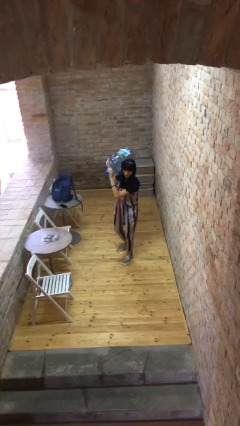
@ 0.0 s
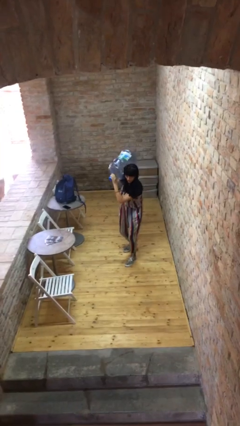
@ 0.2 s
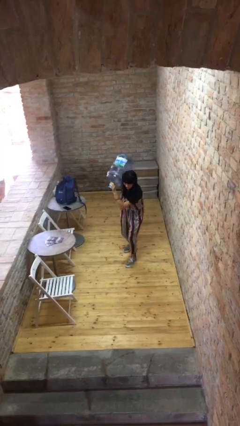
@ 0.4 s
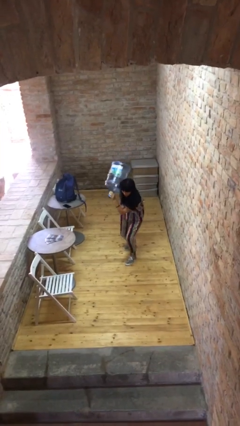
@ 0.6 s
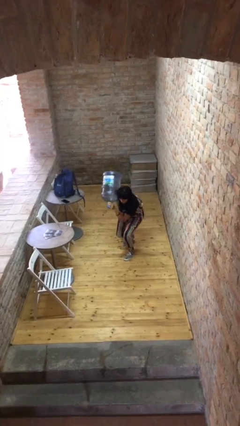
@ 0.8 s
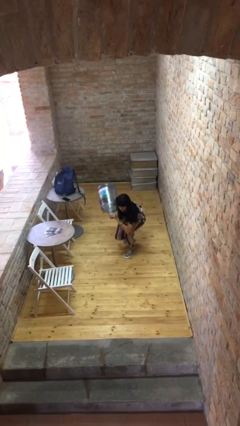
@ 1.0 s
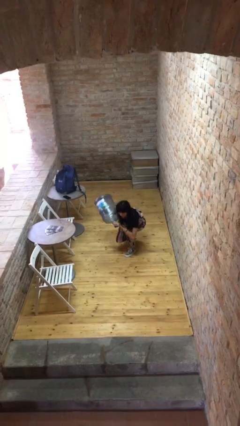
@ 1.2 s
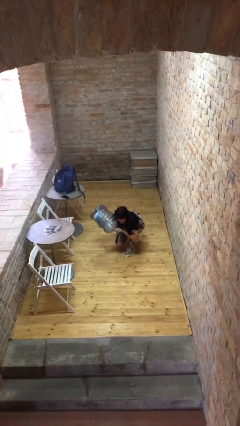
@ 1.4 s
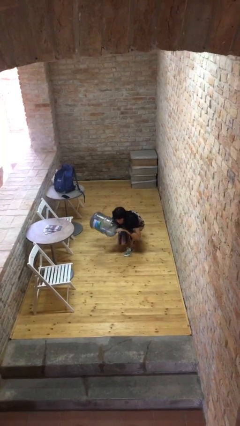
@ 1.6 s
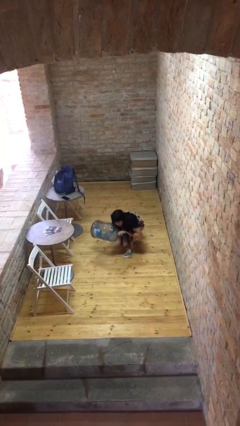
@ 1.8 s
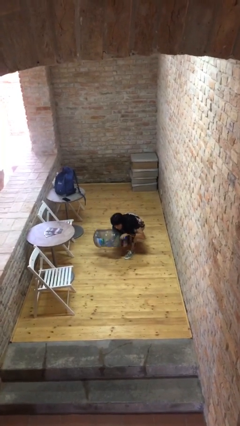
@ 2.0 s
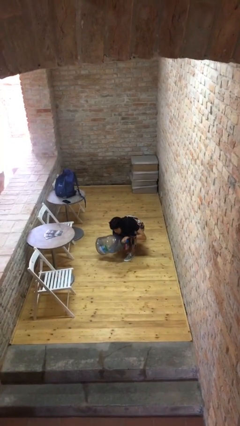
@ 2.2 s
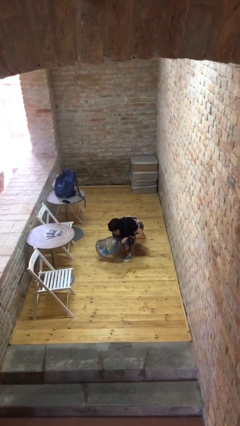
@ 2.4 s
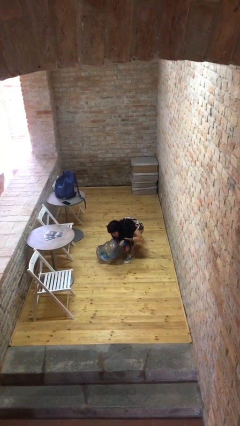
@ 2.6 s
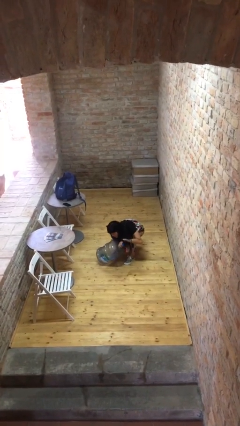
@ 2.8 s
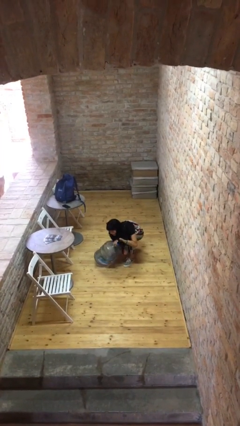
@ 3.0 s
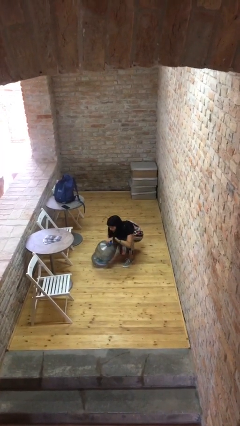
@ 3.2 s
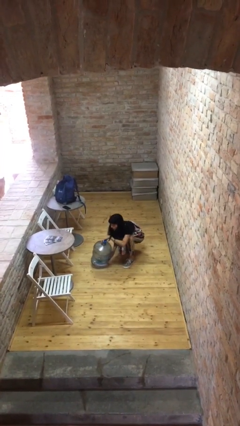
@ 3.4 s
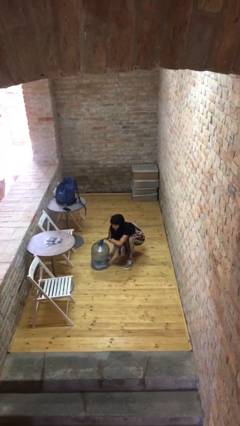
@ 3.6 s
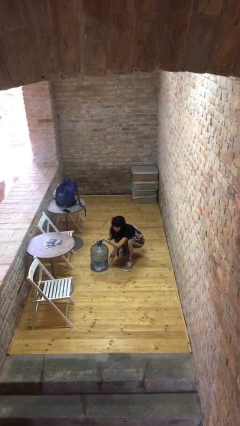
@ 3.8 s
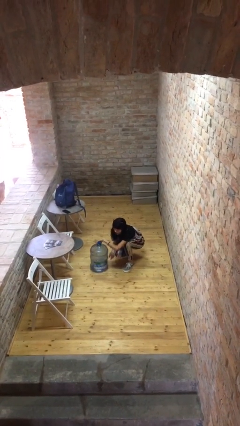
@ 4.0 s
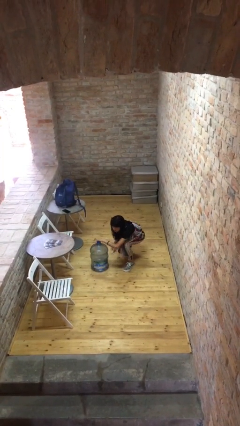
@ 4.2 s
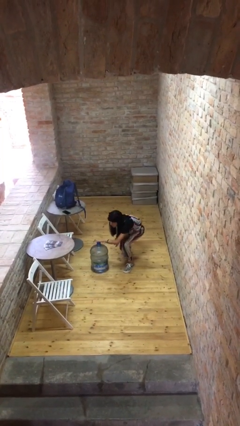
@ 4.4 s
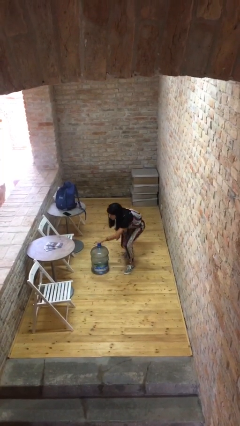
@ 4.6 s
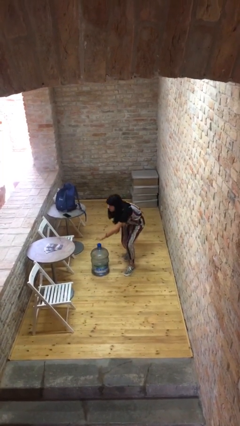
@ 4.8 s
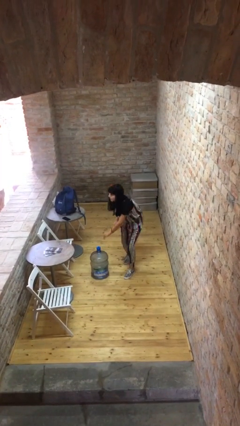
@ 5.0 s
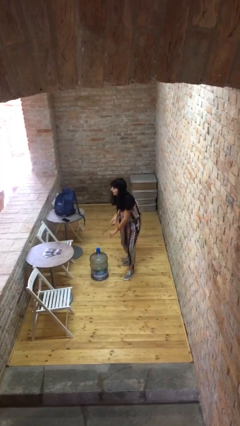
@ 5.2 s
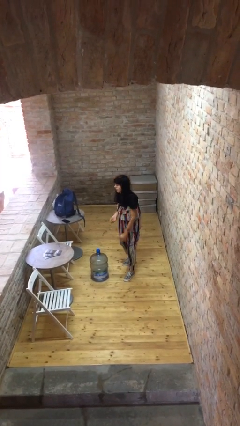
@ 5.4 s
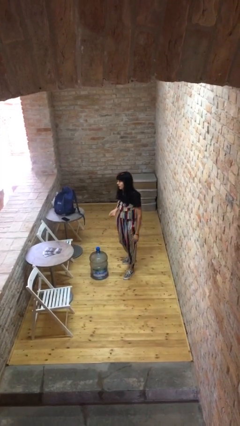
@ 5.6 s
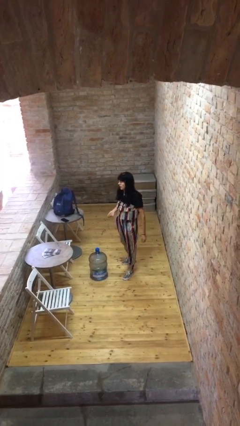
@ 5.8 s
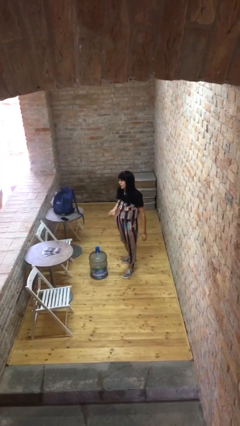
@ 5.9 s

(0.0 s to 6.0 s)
person puts down object on floor

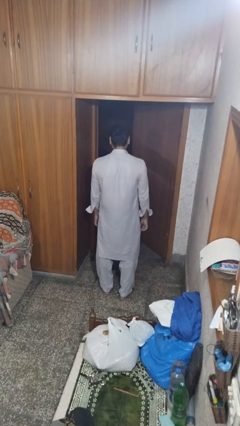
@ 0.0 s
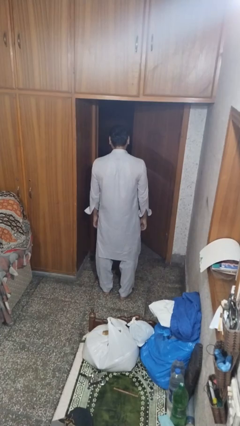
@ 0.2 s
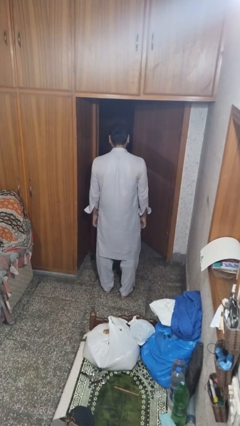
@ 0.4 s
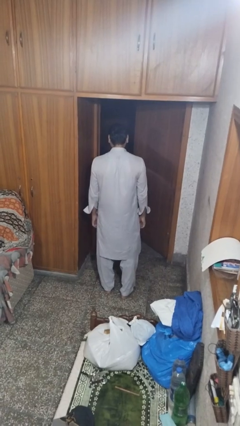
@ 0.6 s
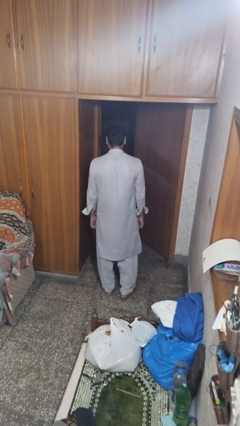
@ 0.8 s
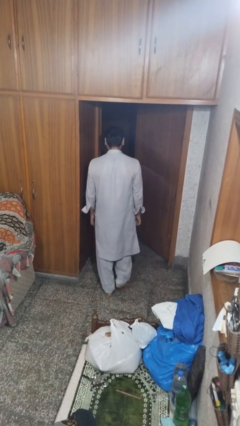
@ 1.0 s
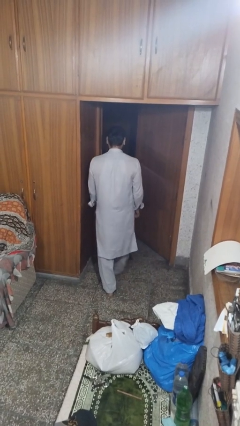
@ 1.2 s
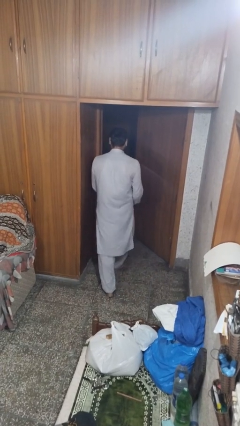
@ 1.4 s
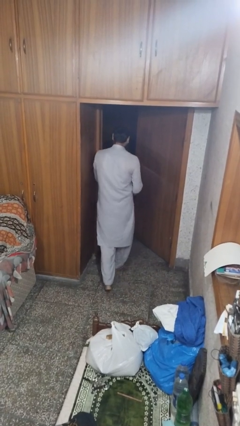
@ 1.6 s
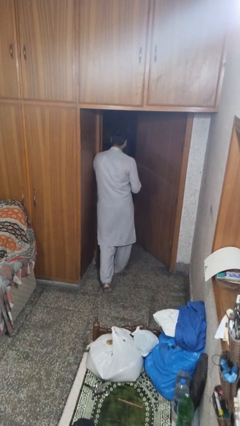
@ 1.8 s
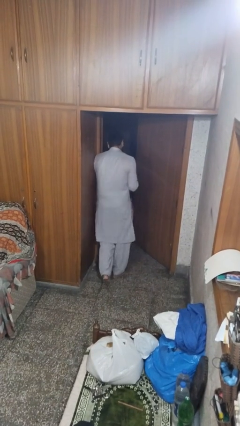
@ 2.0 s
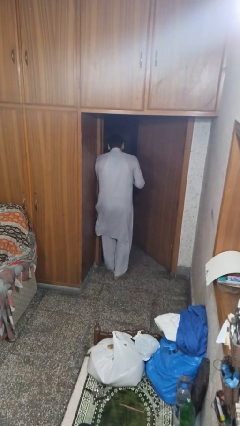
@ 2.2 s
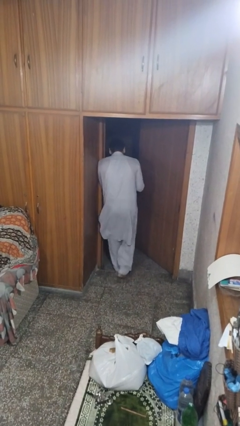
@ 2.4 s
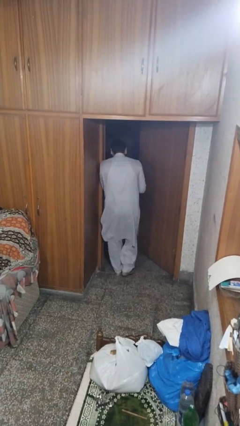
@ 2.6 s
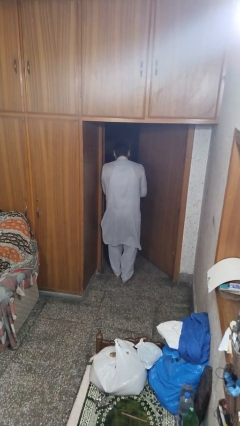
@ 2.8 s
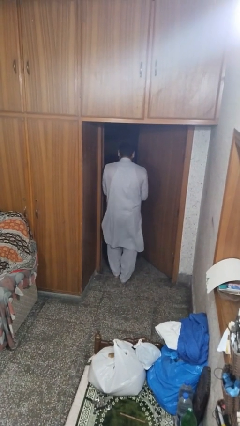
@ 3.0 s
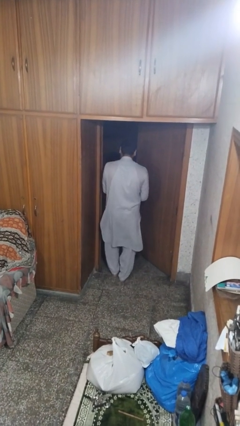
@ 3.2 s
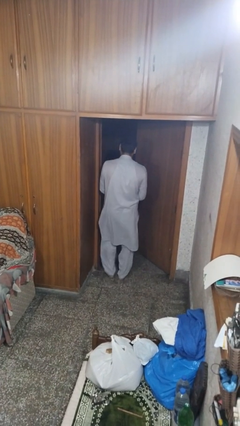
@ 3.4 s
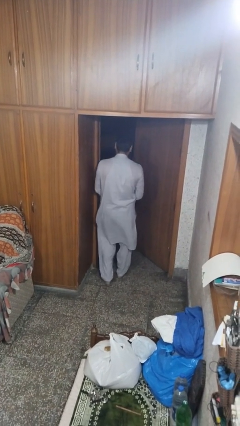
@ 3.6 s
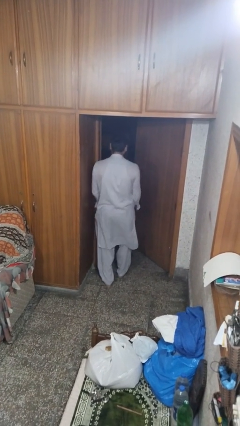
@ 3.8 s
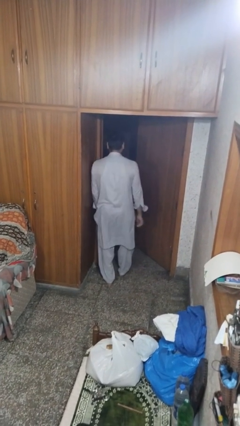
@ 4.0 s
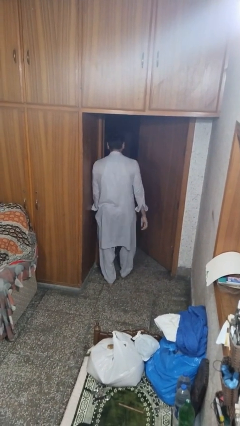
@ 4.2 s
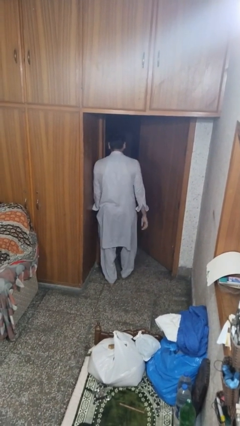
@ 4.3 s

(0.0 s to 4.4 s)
person bumps into wall

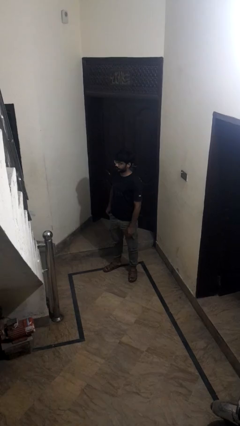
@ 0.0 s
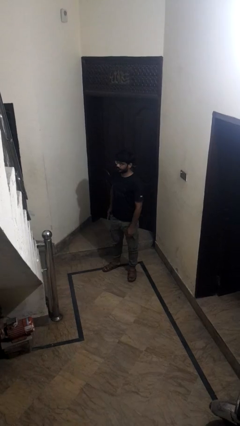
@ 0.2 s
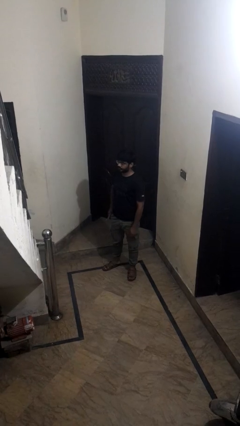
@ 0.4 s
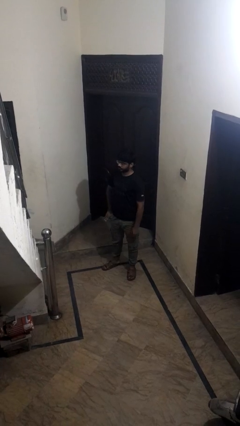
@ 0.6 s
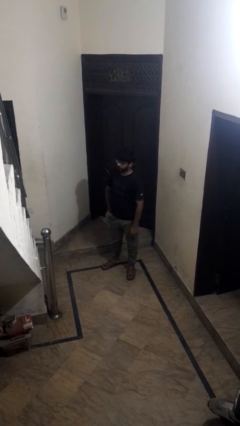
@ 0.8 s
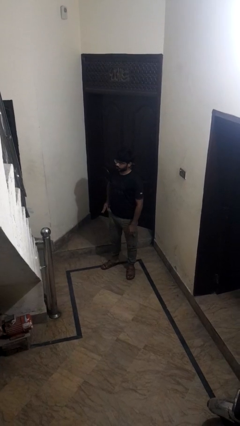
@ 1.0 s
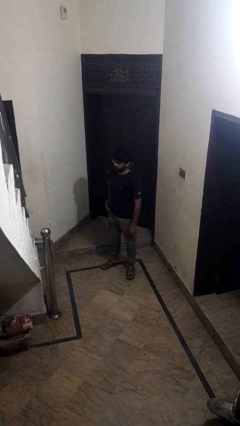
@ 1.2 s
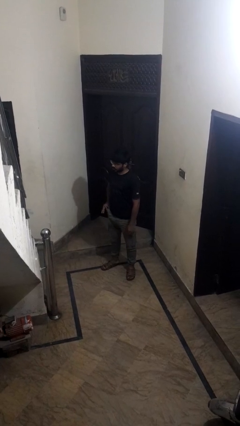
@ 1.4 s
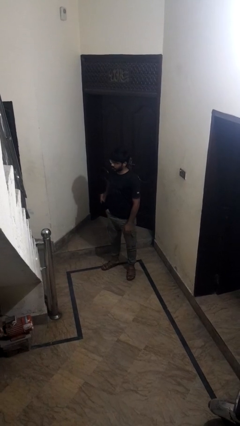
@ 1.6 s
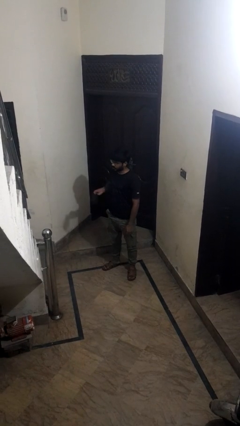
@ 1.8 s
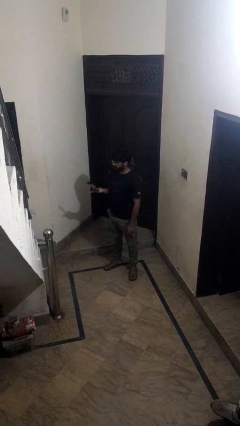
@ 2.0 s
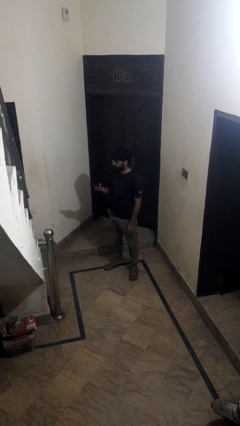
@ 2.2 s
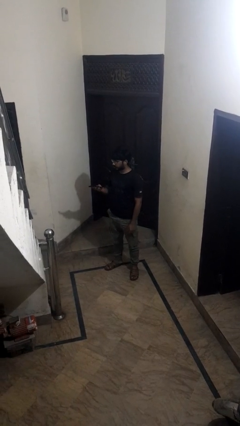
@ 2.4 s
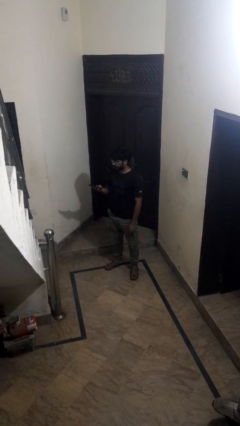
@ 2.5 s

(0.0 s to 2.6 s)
person takes phone from pocket

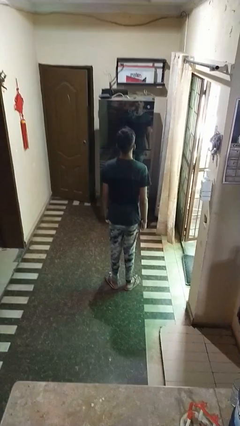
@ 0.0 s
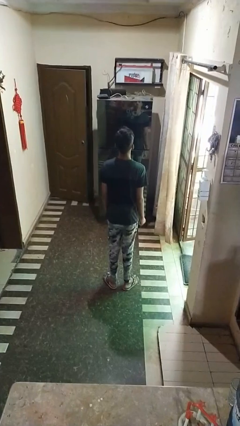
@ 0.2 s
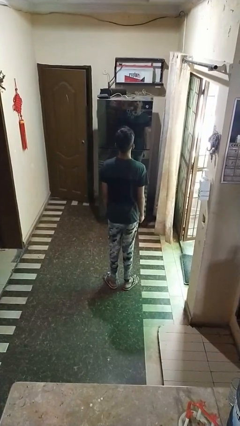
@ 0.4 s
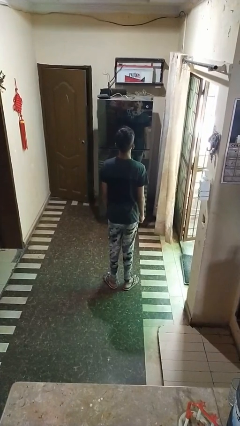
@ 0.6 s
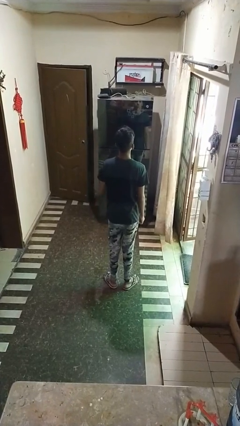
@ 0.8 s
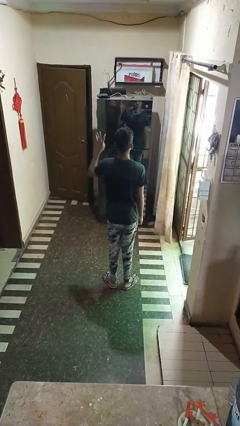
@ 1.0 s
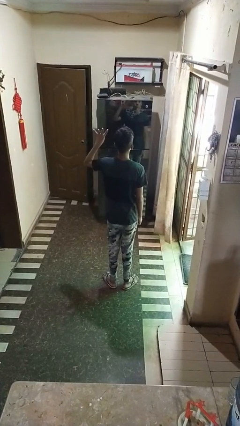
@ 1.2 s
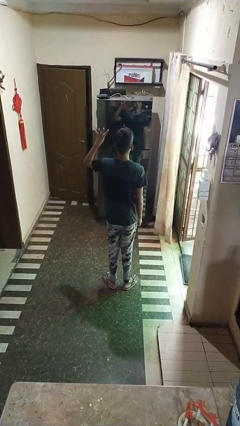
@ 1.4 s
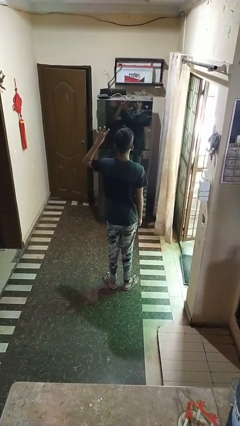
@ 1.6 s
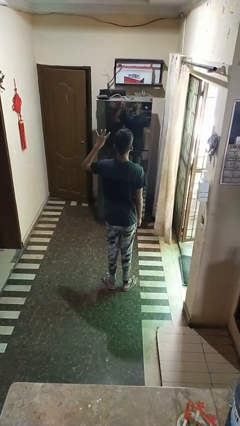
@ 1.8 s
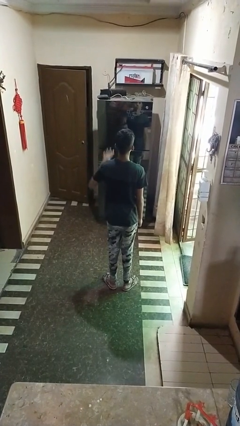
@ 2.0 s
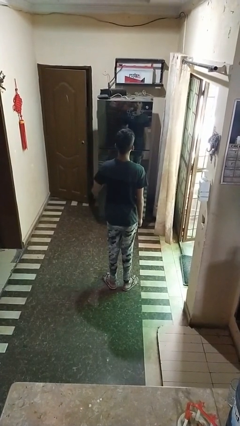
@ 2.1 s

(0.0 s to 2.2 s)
person gestures number four

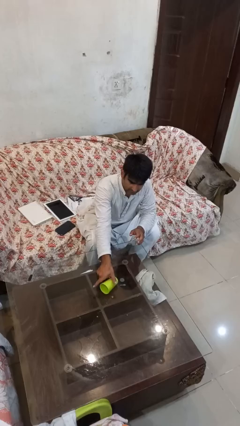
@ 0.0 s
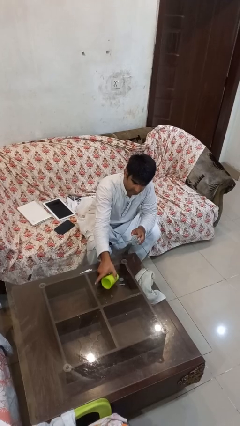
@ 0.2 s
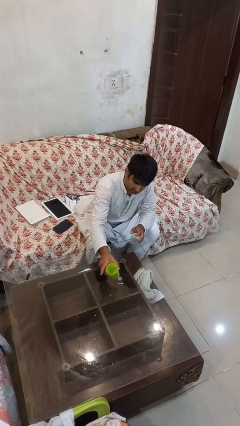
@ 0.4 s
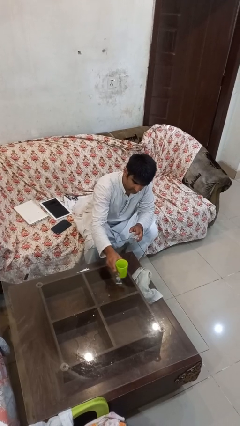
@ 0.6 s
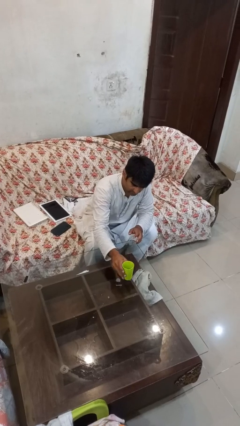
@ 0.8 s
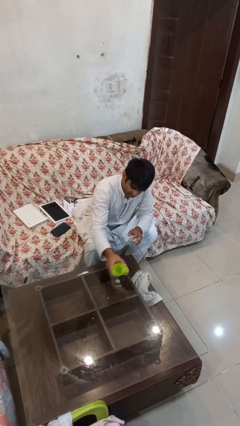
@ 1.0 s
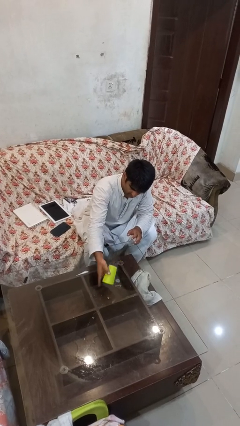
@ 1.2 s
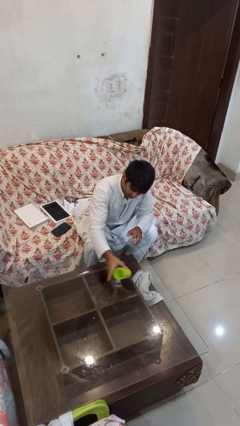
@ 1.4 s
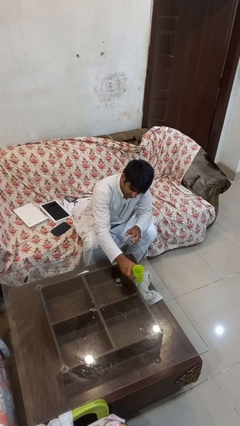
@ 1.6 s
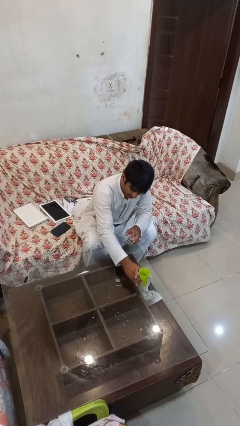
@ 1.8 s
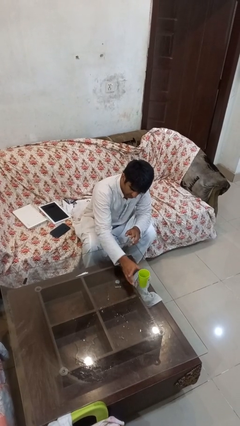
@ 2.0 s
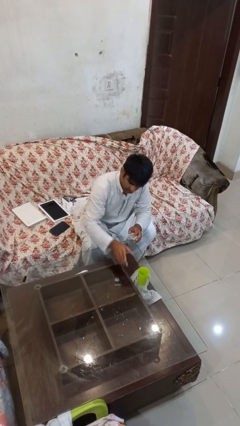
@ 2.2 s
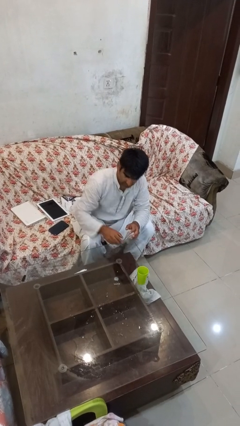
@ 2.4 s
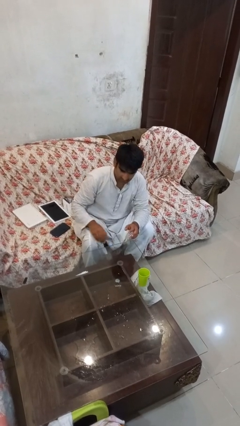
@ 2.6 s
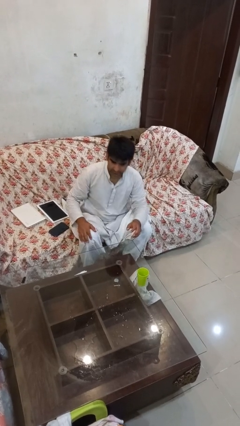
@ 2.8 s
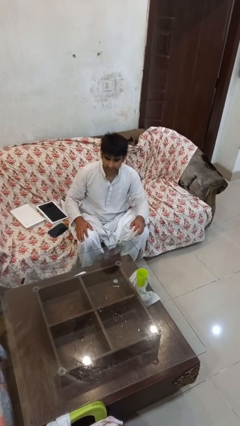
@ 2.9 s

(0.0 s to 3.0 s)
person sets upright glass
